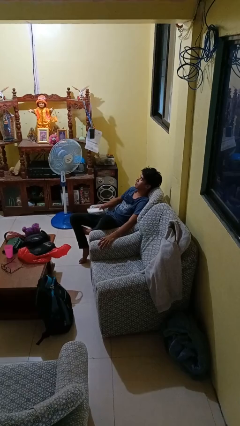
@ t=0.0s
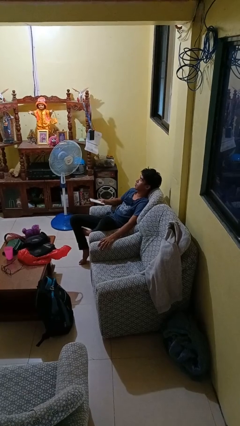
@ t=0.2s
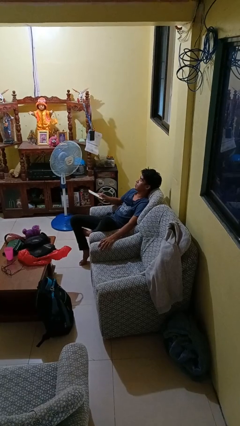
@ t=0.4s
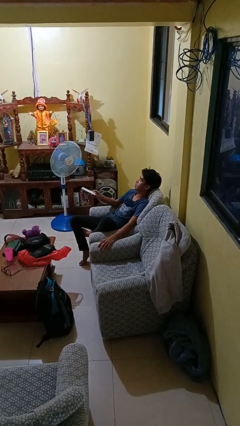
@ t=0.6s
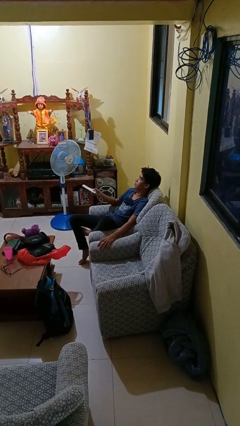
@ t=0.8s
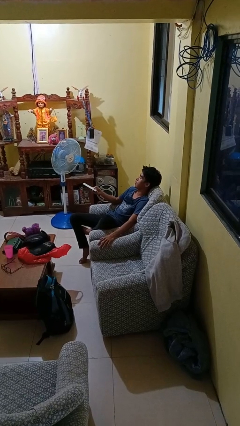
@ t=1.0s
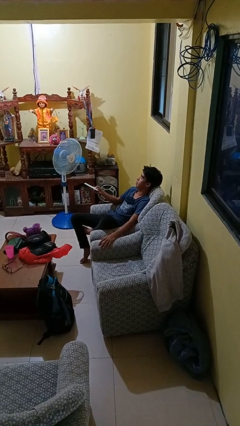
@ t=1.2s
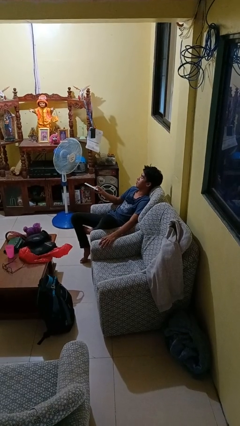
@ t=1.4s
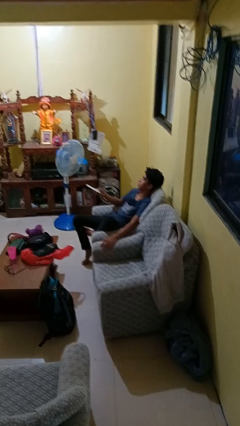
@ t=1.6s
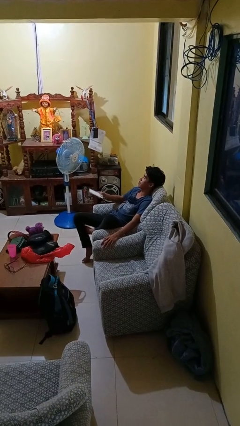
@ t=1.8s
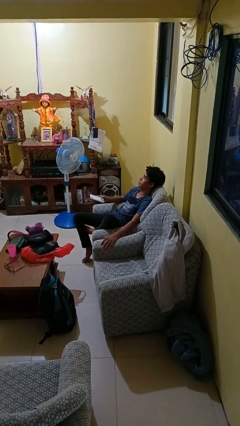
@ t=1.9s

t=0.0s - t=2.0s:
person uses television remote

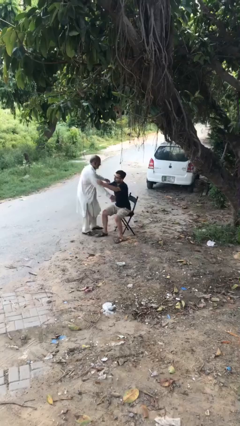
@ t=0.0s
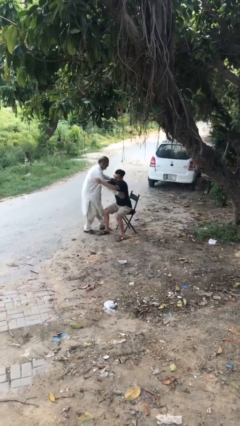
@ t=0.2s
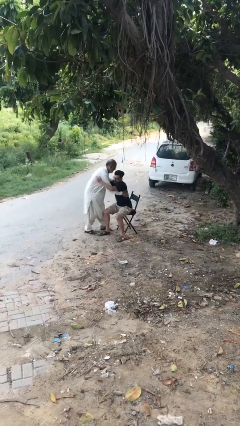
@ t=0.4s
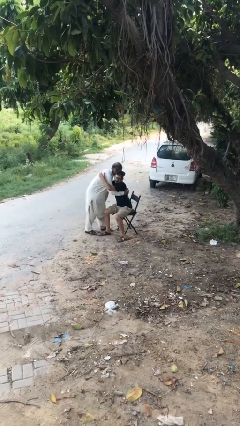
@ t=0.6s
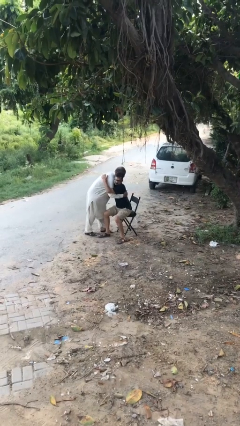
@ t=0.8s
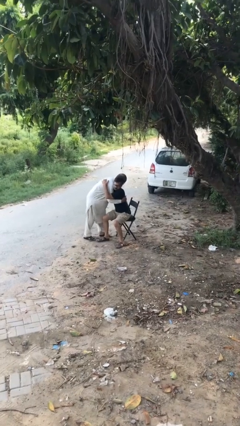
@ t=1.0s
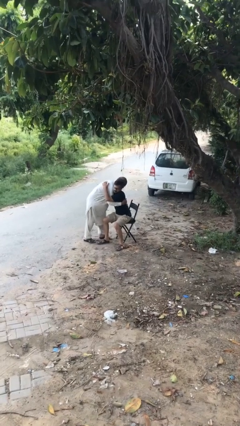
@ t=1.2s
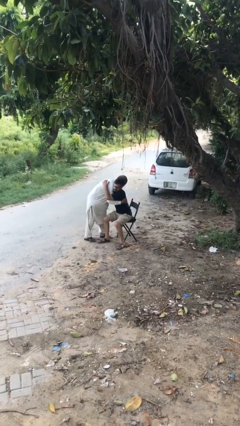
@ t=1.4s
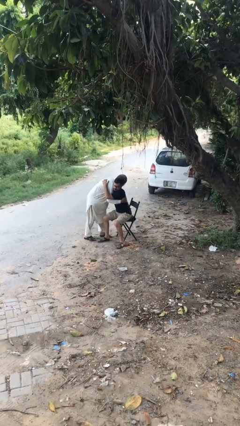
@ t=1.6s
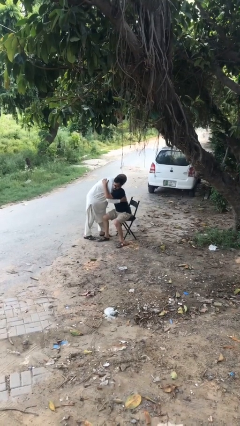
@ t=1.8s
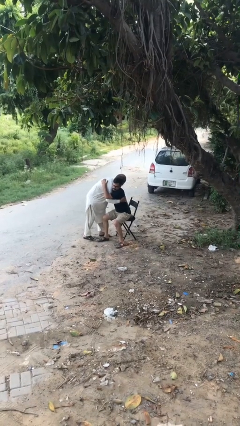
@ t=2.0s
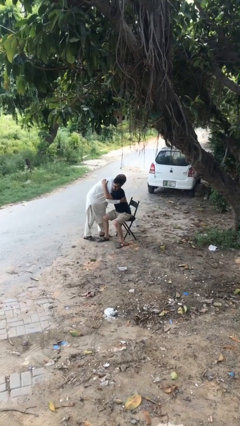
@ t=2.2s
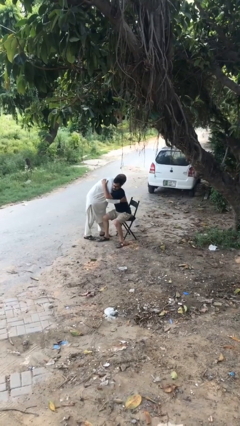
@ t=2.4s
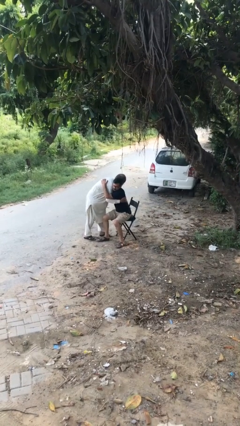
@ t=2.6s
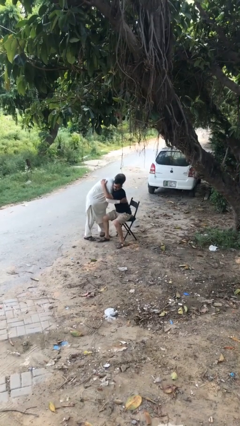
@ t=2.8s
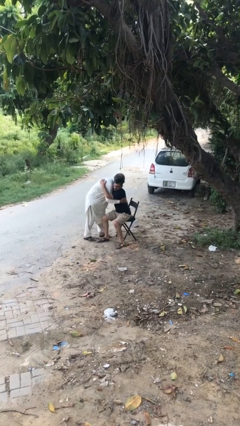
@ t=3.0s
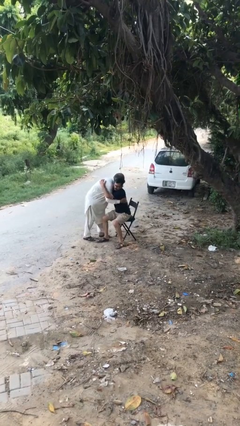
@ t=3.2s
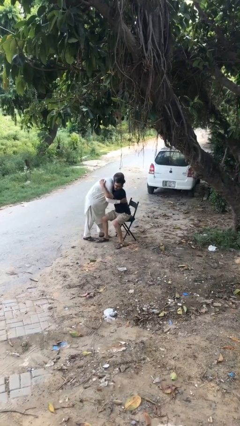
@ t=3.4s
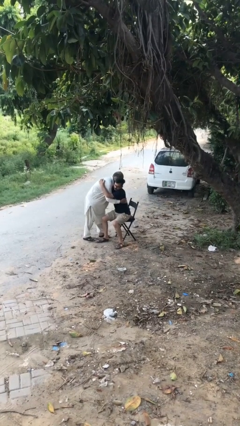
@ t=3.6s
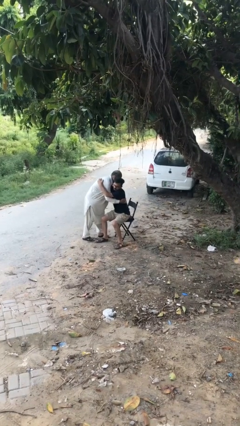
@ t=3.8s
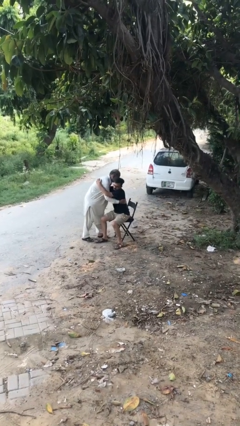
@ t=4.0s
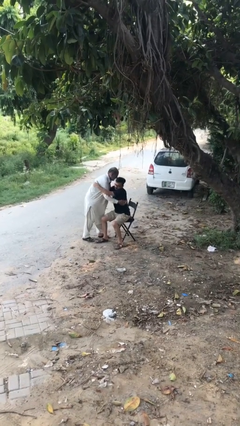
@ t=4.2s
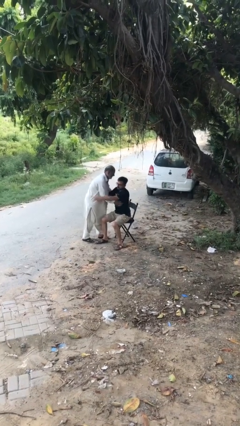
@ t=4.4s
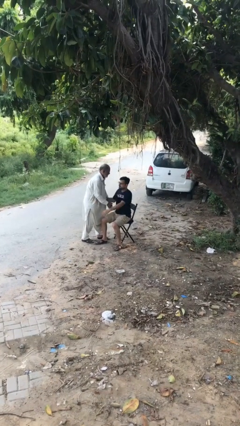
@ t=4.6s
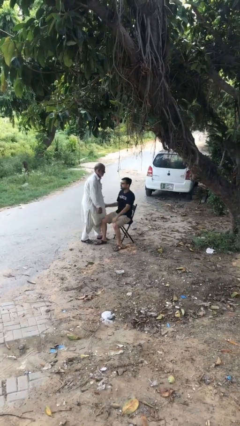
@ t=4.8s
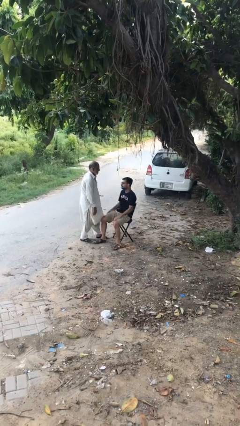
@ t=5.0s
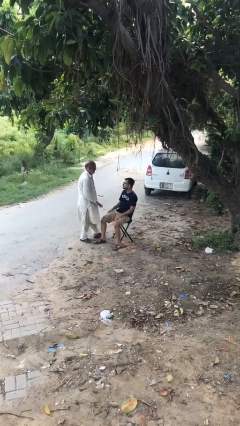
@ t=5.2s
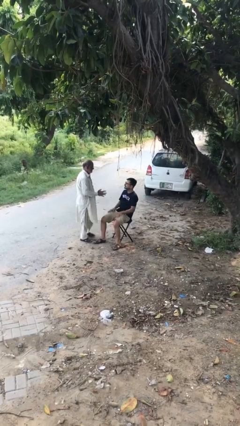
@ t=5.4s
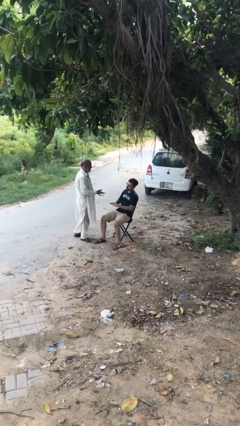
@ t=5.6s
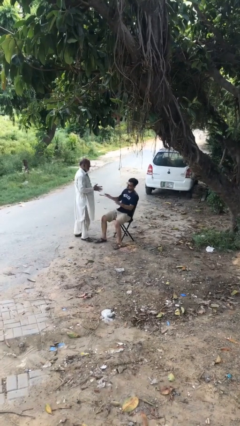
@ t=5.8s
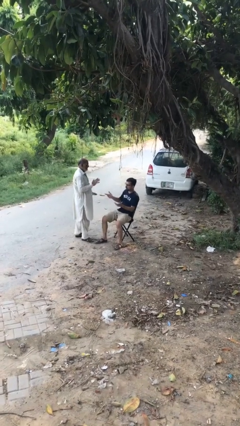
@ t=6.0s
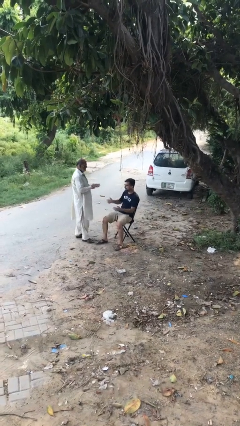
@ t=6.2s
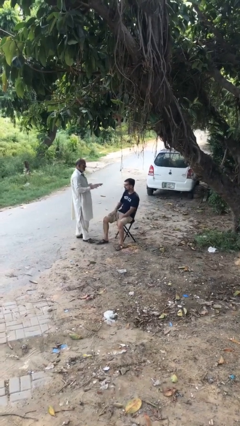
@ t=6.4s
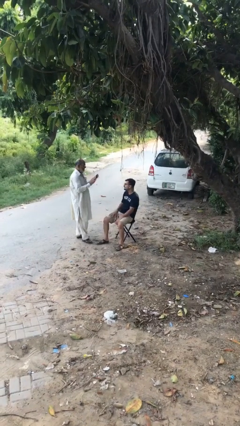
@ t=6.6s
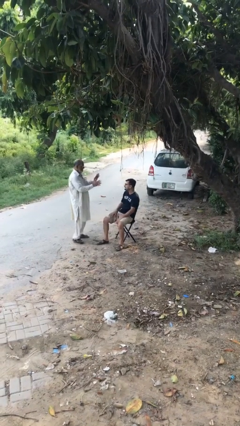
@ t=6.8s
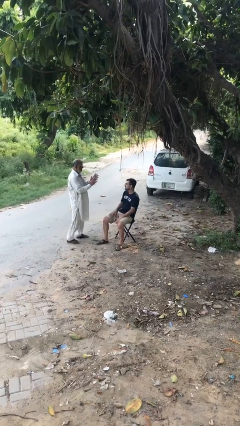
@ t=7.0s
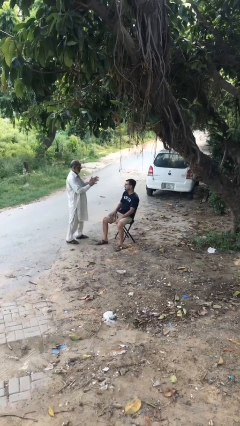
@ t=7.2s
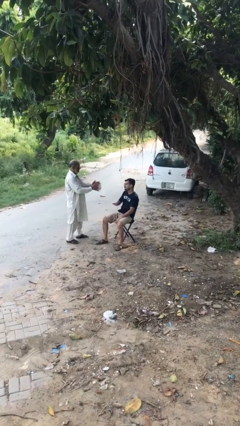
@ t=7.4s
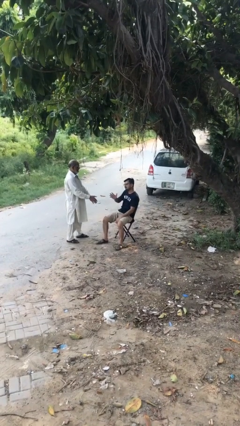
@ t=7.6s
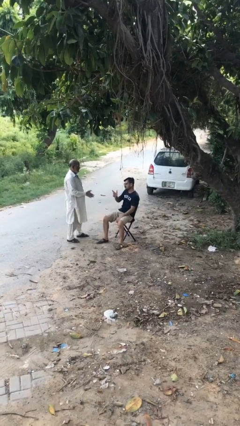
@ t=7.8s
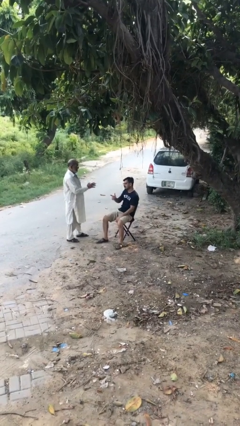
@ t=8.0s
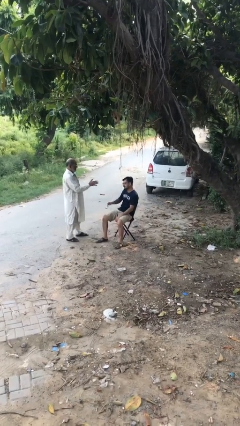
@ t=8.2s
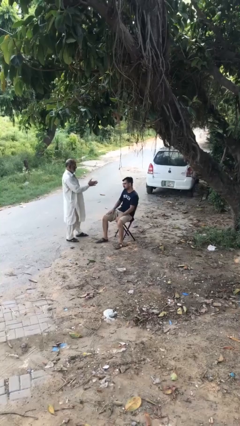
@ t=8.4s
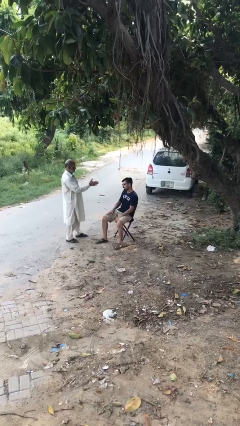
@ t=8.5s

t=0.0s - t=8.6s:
person embraces person

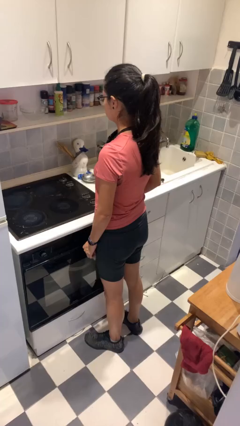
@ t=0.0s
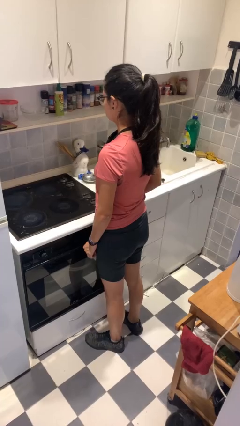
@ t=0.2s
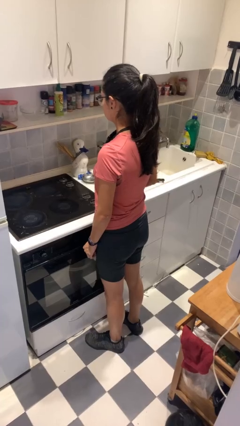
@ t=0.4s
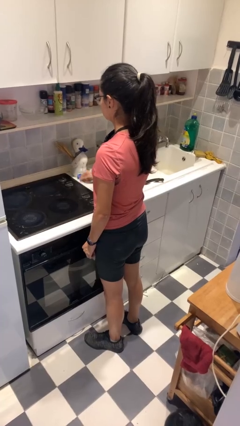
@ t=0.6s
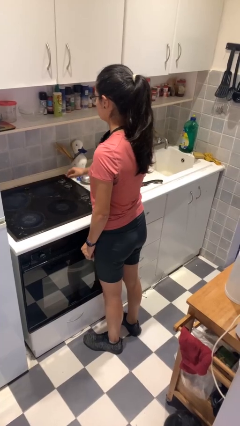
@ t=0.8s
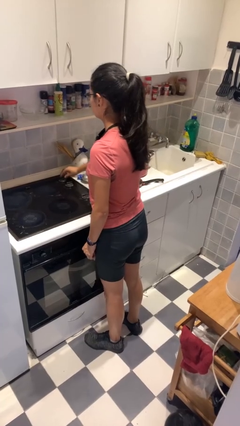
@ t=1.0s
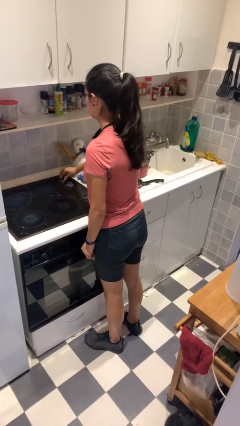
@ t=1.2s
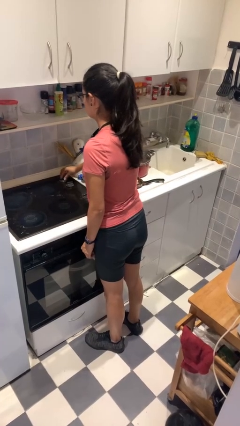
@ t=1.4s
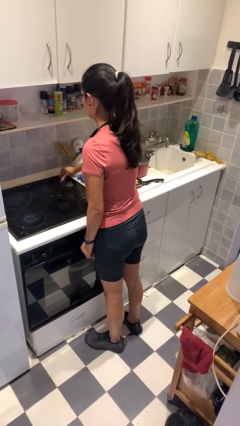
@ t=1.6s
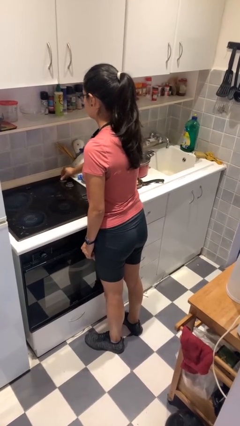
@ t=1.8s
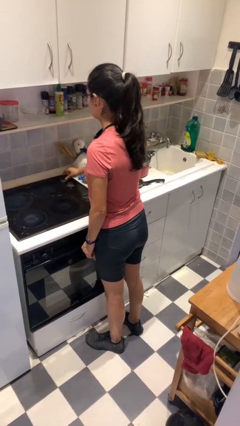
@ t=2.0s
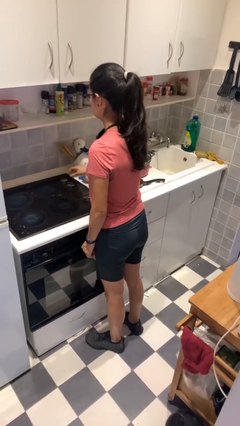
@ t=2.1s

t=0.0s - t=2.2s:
person turns off stovetop

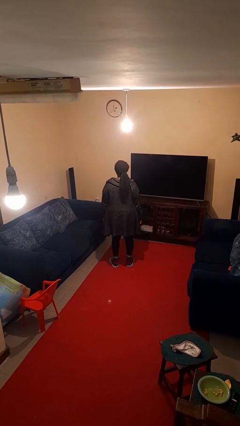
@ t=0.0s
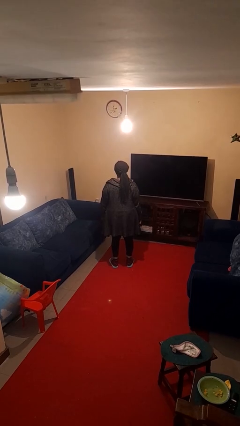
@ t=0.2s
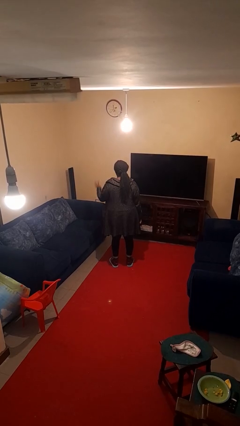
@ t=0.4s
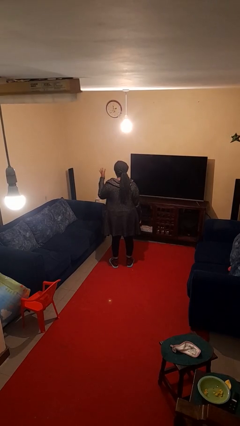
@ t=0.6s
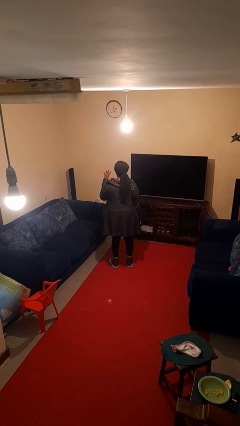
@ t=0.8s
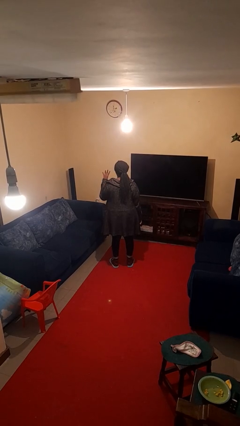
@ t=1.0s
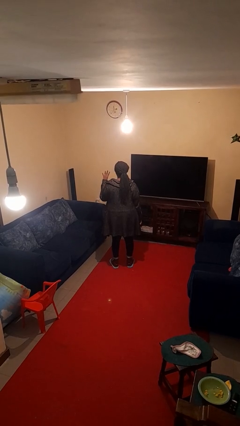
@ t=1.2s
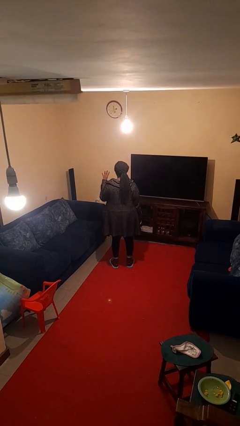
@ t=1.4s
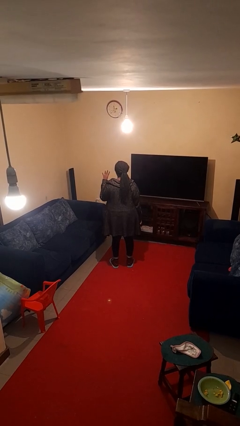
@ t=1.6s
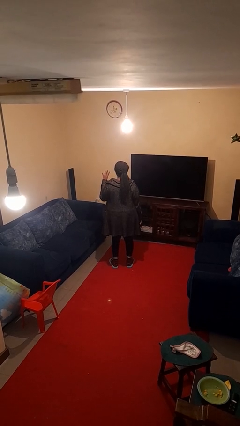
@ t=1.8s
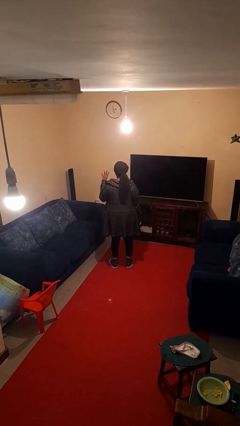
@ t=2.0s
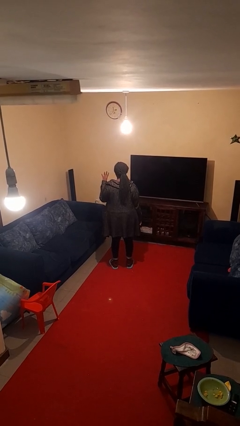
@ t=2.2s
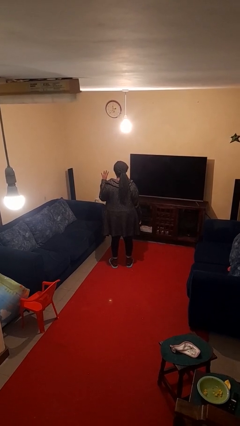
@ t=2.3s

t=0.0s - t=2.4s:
person gestures number four

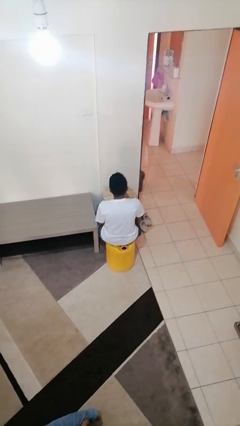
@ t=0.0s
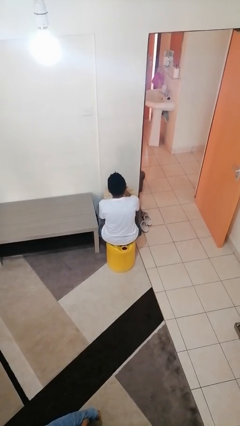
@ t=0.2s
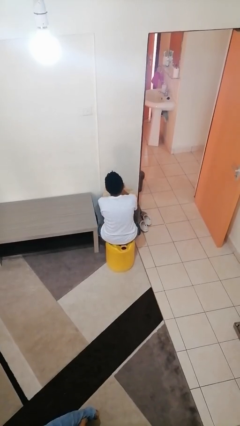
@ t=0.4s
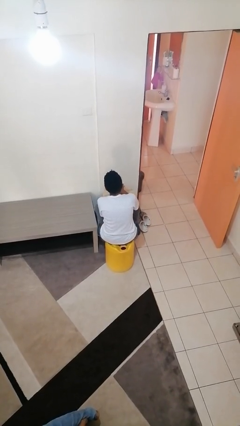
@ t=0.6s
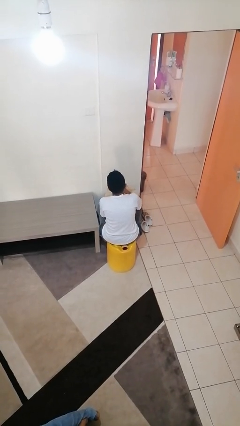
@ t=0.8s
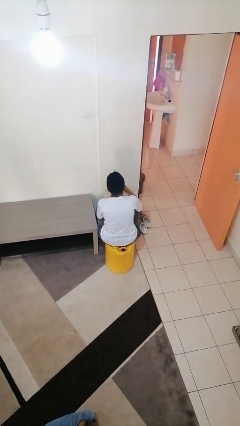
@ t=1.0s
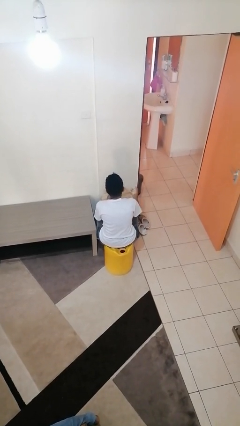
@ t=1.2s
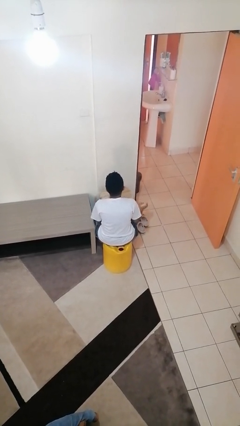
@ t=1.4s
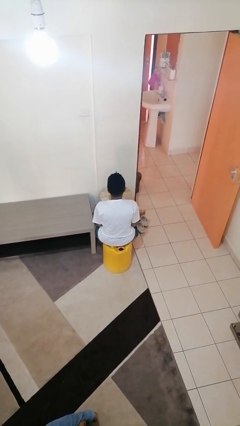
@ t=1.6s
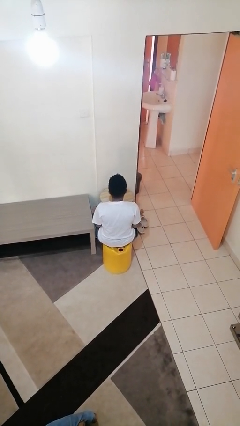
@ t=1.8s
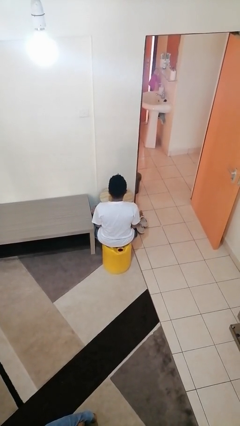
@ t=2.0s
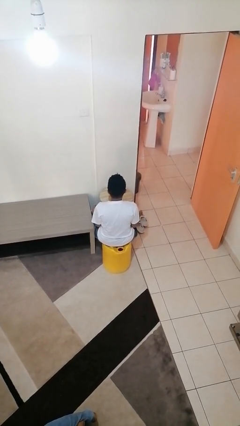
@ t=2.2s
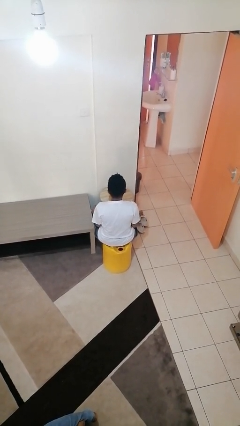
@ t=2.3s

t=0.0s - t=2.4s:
person opens jar
